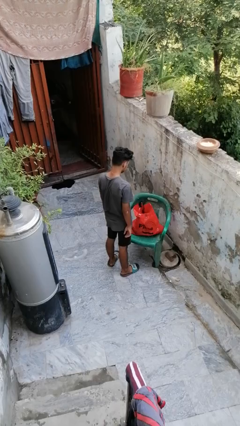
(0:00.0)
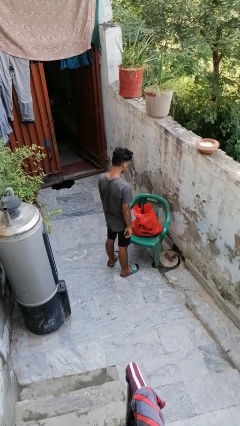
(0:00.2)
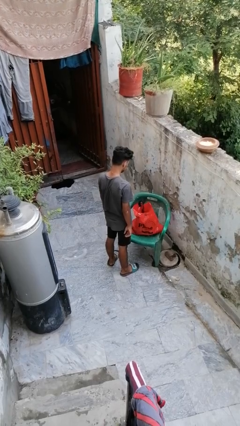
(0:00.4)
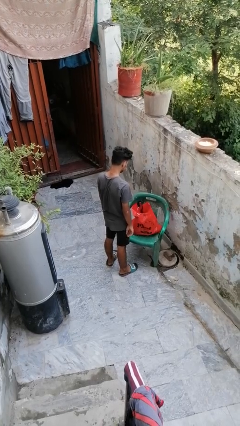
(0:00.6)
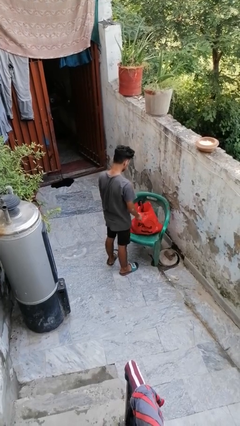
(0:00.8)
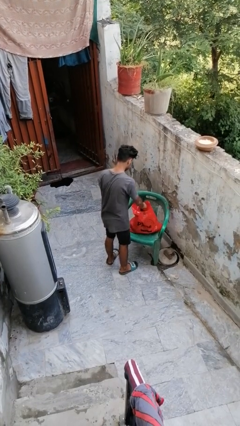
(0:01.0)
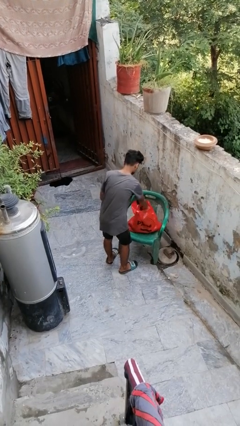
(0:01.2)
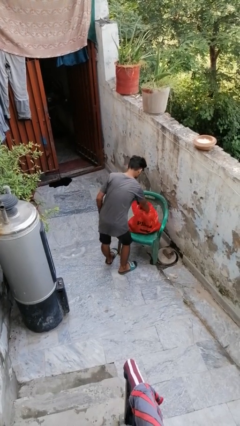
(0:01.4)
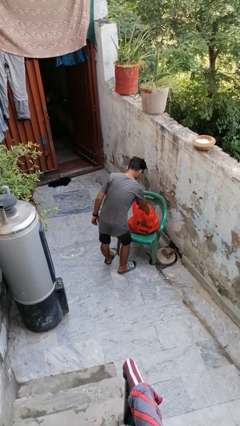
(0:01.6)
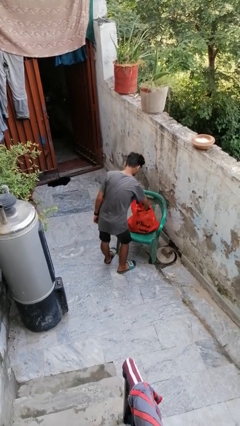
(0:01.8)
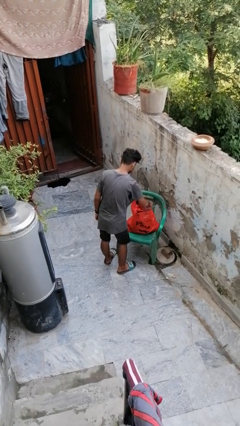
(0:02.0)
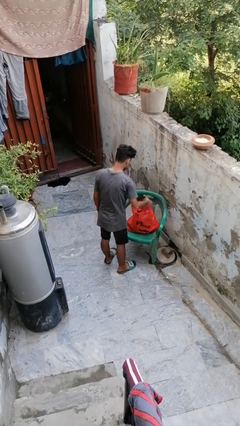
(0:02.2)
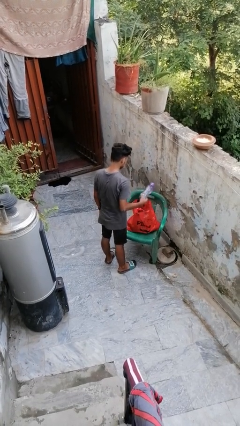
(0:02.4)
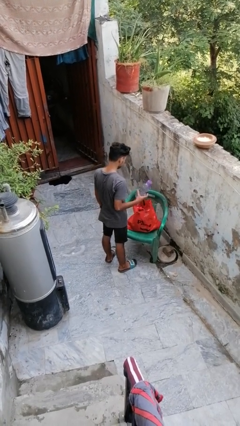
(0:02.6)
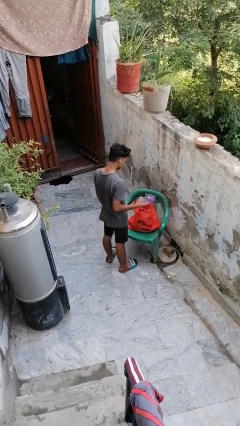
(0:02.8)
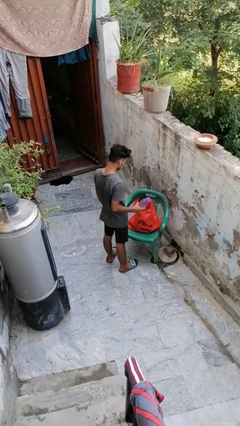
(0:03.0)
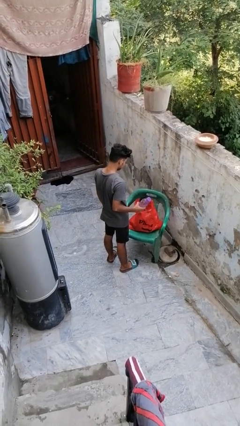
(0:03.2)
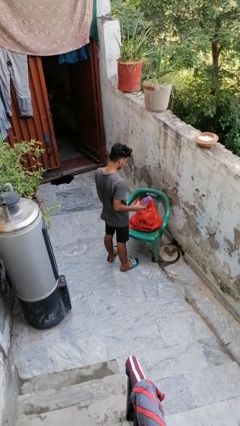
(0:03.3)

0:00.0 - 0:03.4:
person takes object from bag

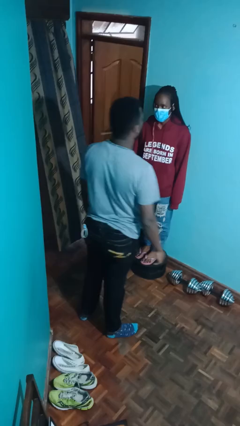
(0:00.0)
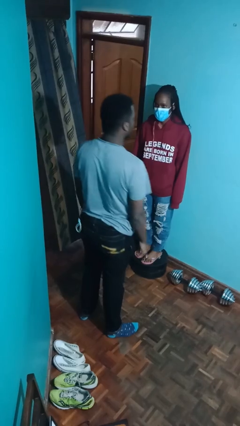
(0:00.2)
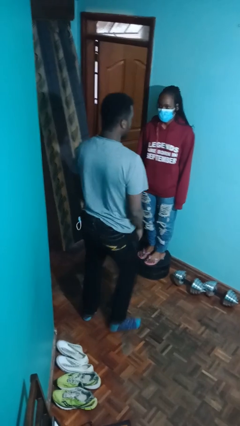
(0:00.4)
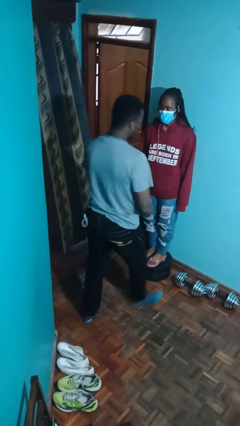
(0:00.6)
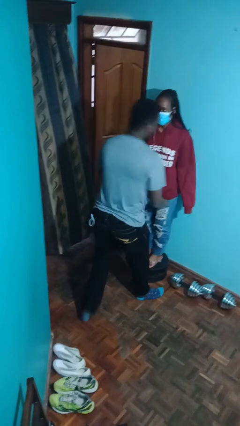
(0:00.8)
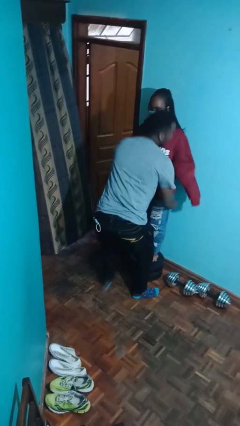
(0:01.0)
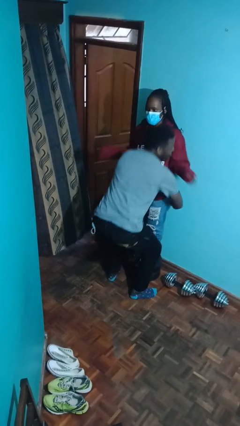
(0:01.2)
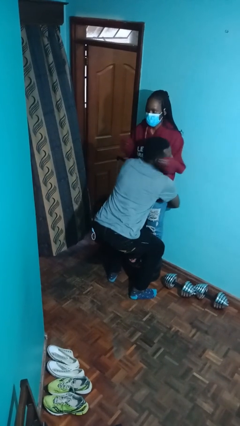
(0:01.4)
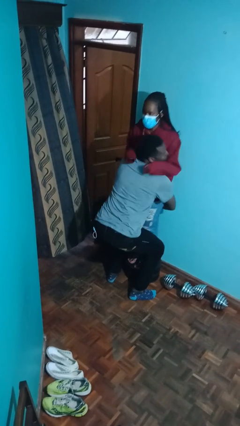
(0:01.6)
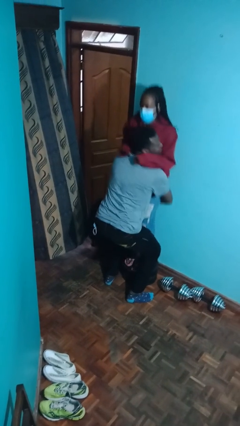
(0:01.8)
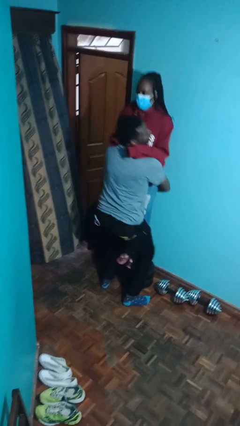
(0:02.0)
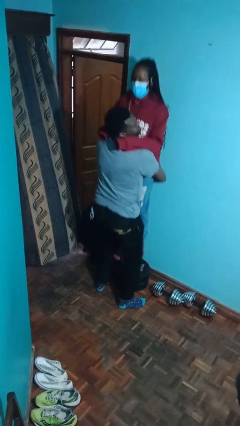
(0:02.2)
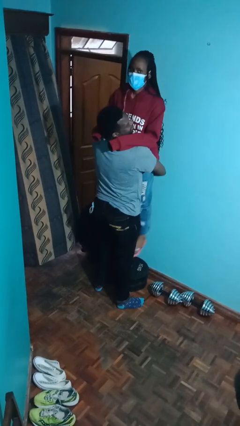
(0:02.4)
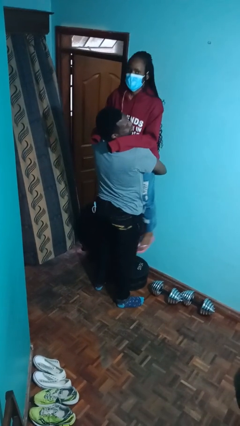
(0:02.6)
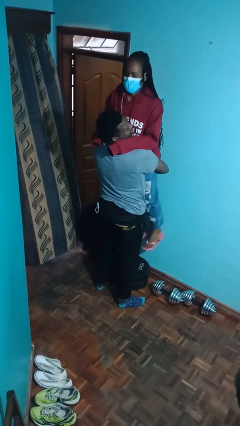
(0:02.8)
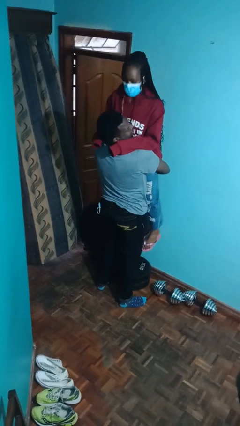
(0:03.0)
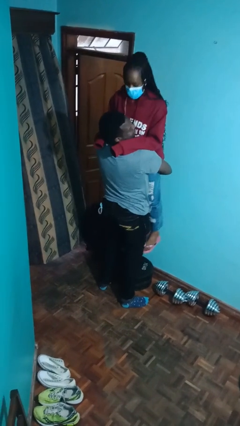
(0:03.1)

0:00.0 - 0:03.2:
person picks up person

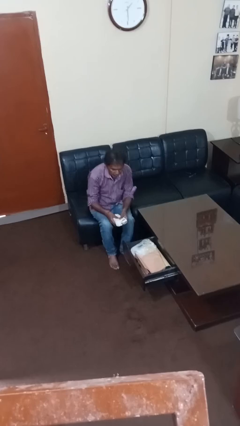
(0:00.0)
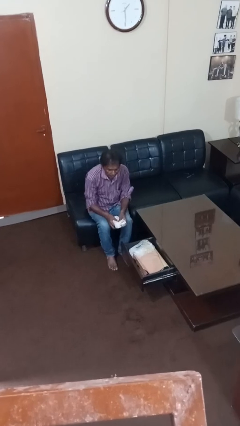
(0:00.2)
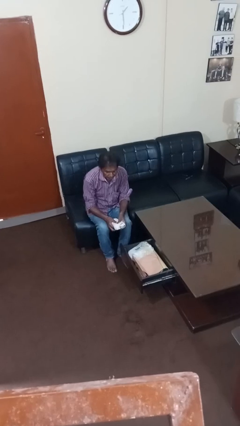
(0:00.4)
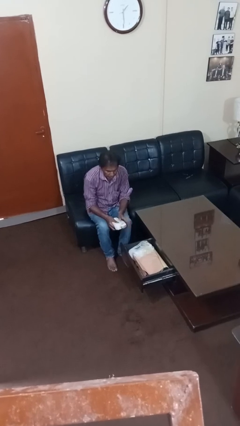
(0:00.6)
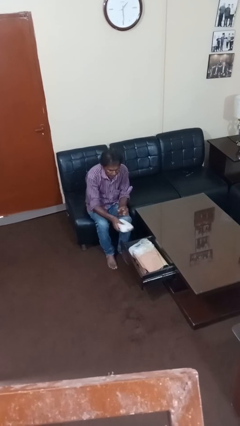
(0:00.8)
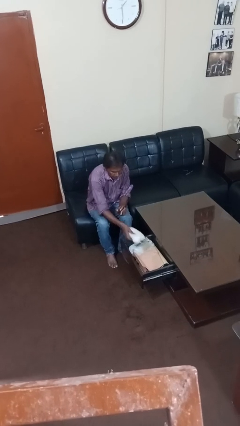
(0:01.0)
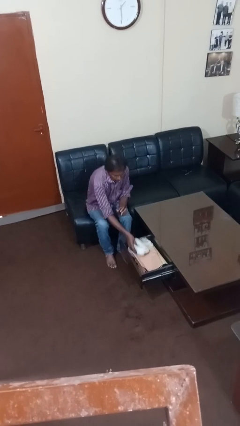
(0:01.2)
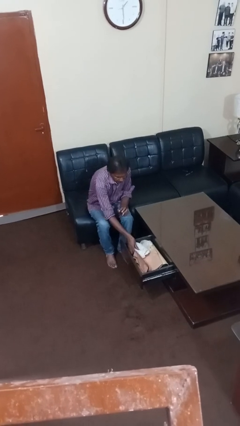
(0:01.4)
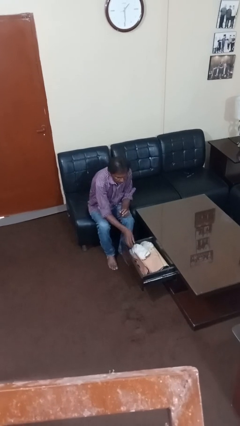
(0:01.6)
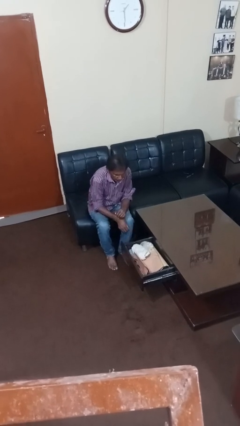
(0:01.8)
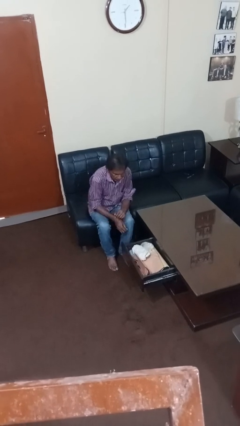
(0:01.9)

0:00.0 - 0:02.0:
person puts clothes into dresser

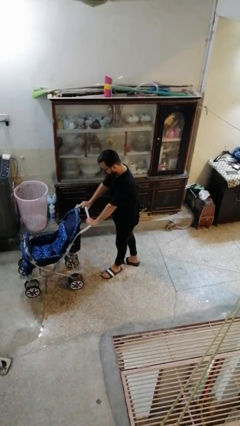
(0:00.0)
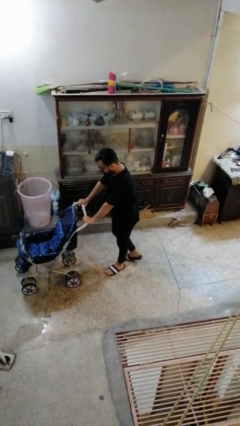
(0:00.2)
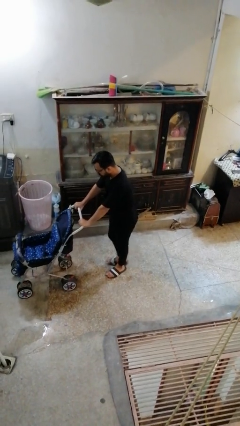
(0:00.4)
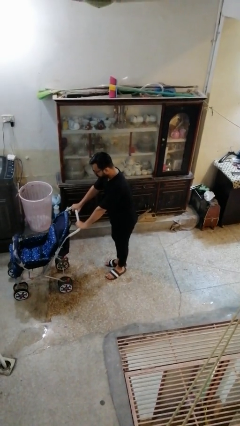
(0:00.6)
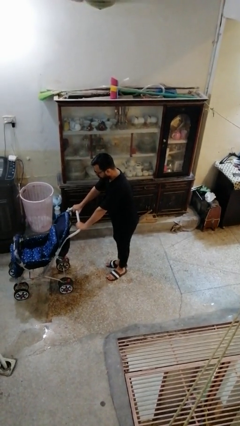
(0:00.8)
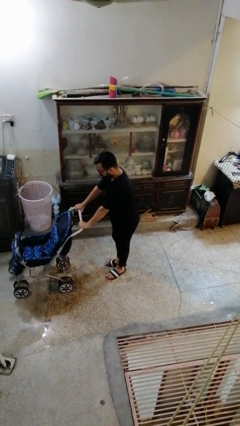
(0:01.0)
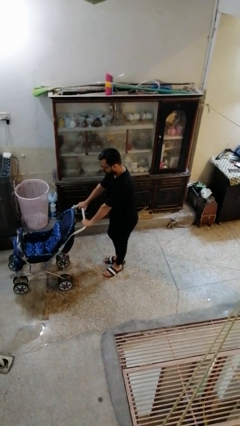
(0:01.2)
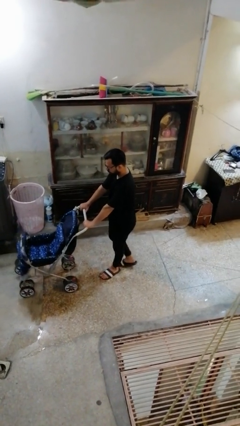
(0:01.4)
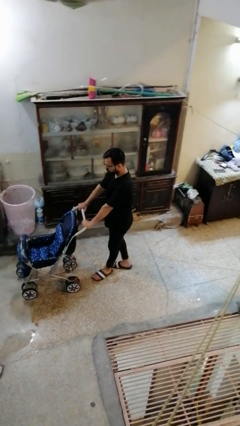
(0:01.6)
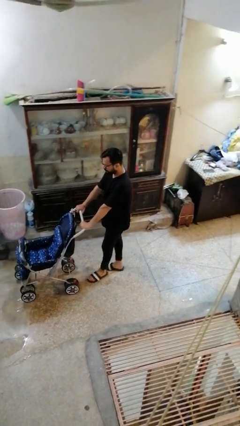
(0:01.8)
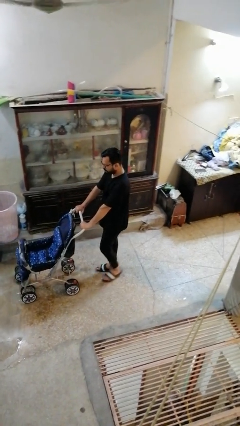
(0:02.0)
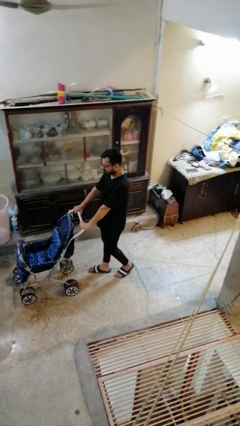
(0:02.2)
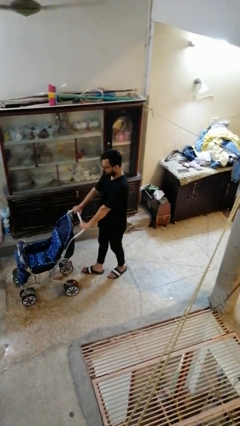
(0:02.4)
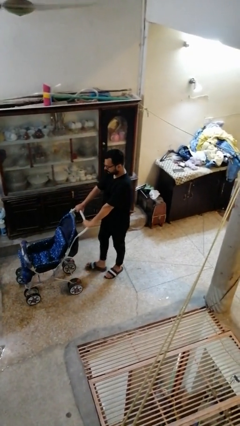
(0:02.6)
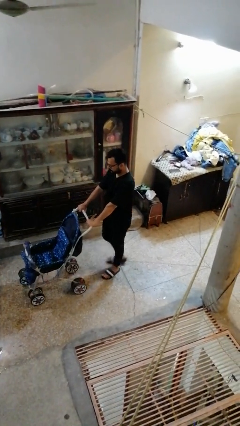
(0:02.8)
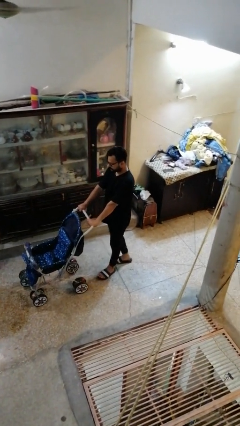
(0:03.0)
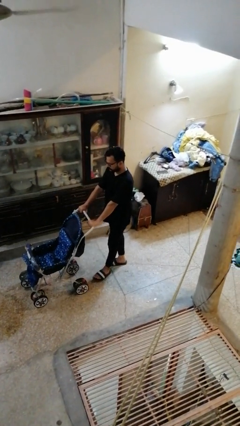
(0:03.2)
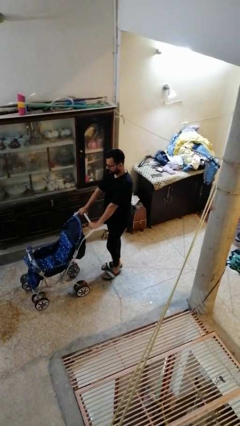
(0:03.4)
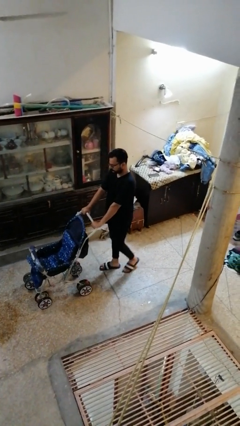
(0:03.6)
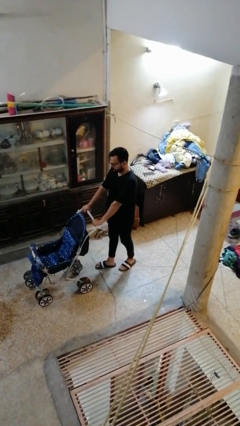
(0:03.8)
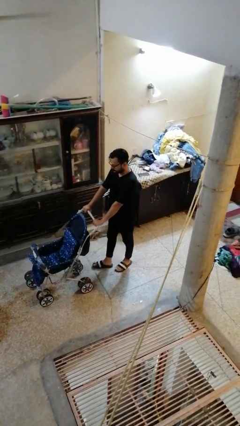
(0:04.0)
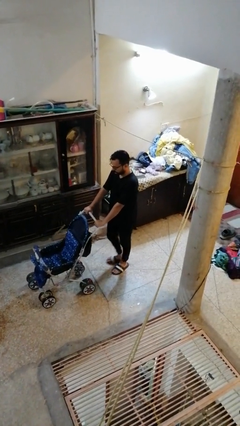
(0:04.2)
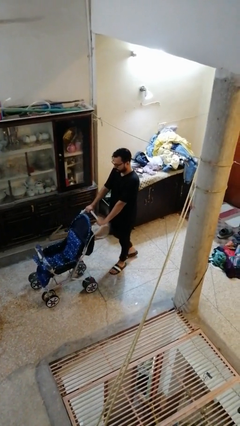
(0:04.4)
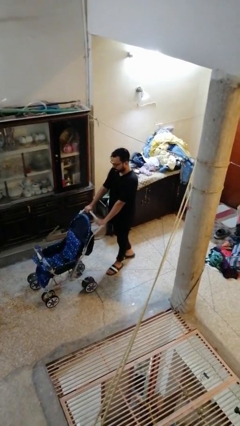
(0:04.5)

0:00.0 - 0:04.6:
person pulls wheeled cart

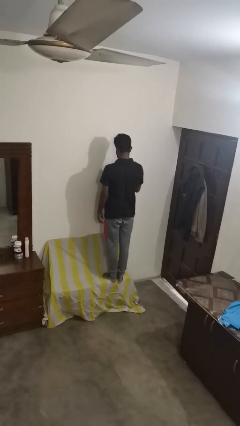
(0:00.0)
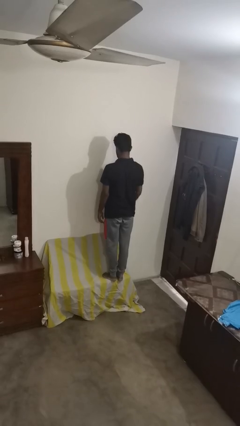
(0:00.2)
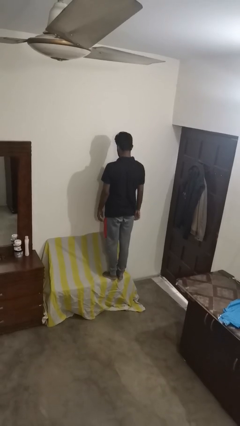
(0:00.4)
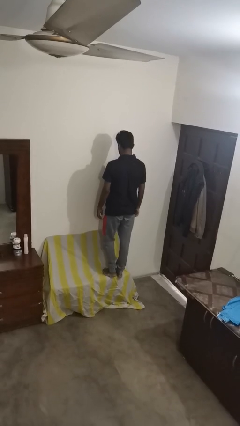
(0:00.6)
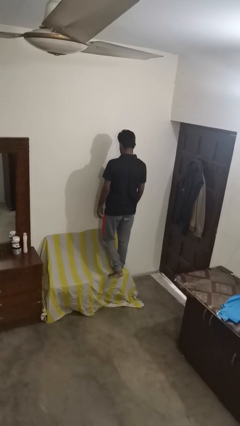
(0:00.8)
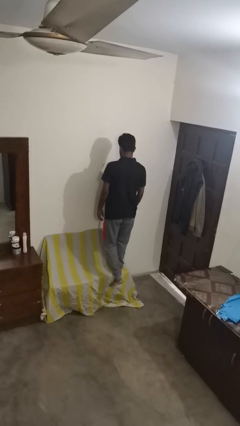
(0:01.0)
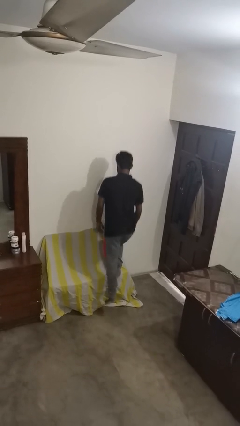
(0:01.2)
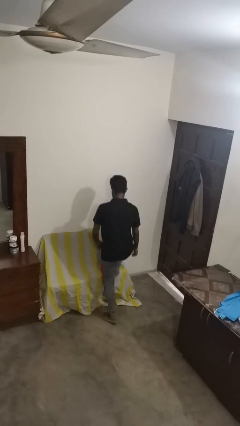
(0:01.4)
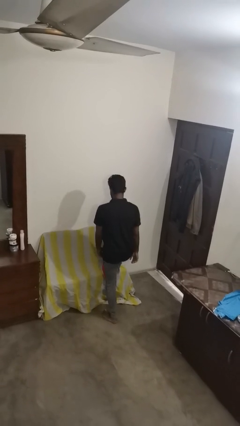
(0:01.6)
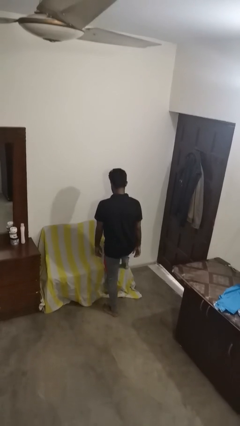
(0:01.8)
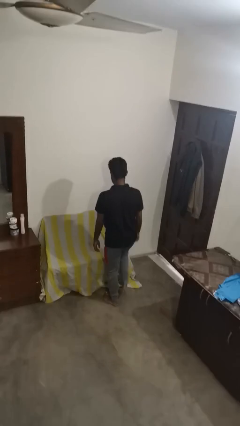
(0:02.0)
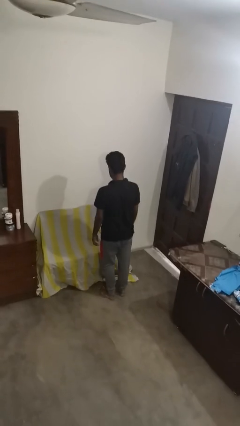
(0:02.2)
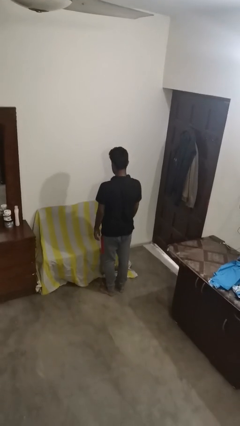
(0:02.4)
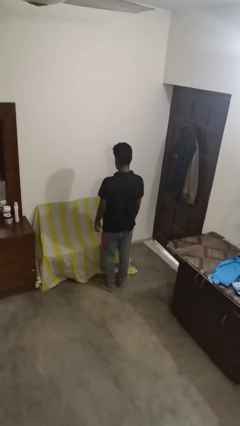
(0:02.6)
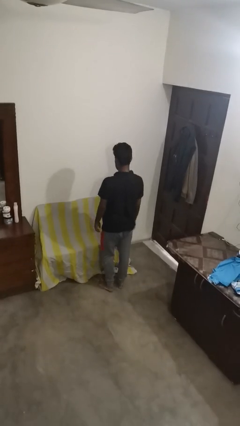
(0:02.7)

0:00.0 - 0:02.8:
person climbs off couch

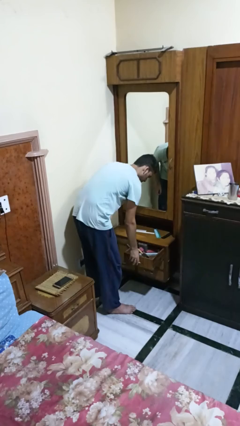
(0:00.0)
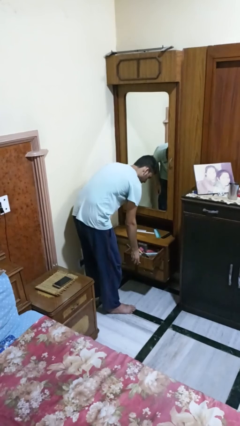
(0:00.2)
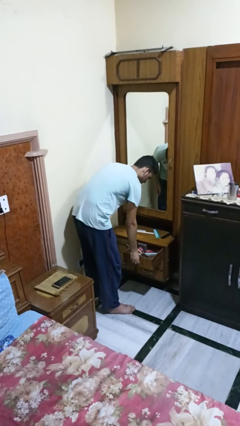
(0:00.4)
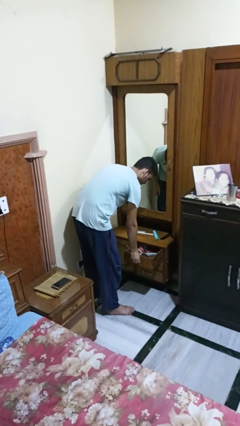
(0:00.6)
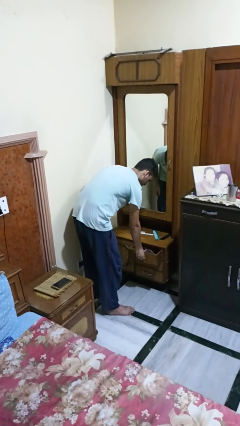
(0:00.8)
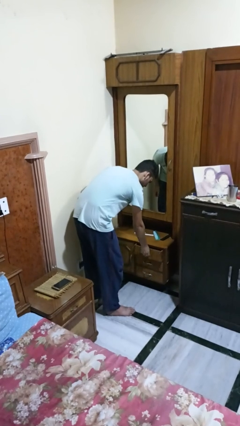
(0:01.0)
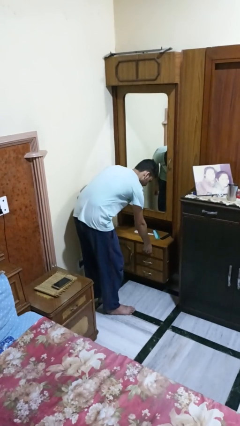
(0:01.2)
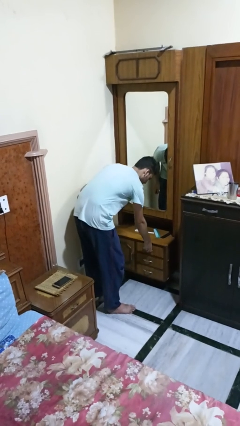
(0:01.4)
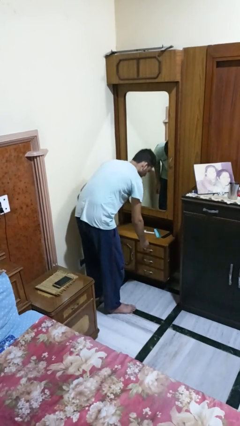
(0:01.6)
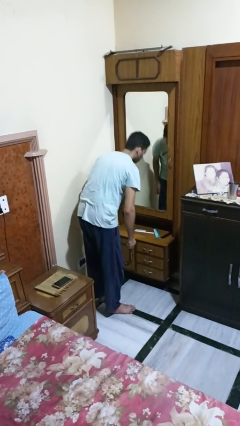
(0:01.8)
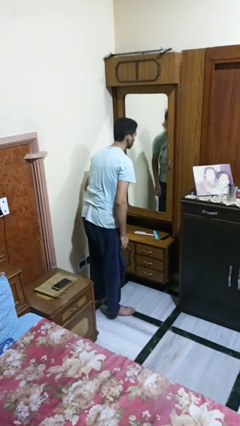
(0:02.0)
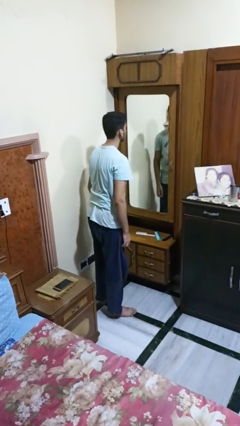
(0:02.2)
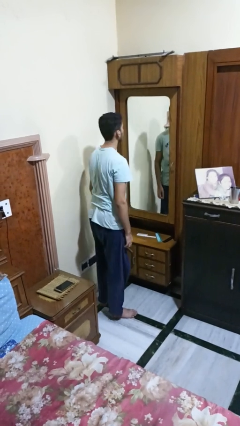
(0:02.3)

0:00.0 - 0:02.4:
person closes dresser drawer
